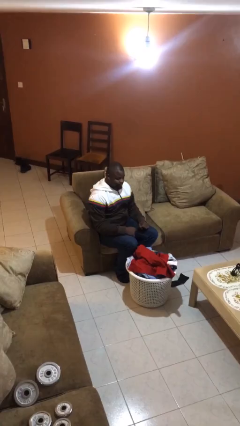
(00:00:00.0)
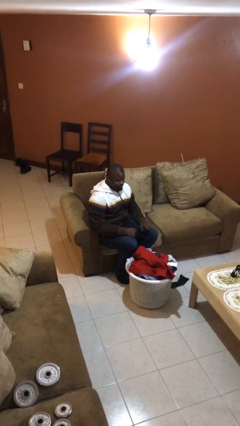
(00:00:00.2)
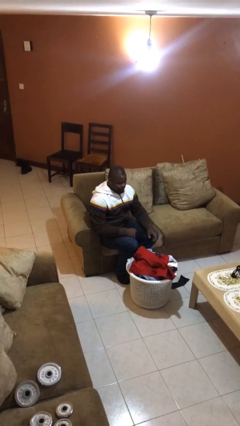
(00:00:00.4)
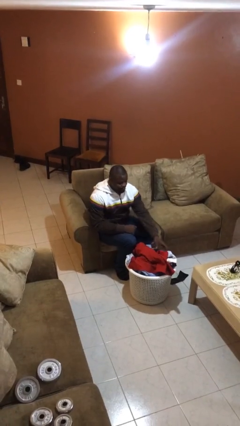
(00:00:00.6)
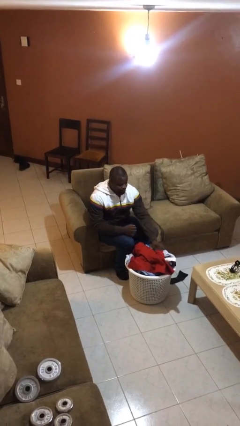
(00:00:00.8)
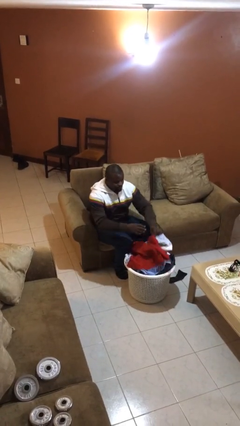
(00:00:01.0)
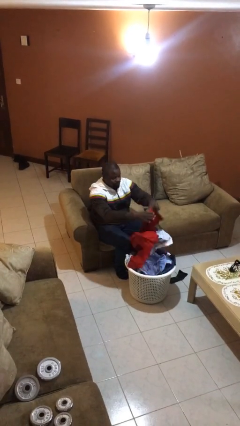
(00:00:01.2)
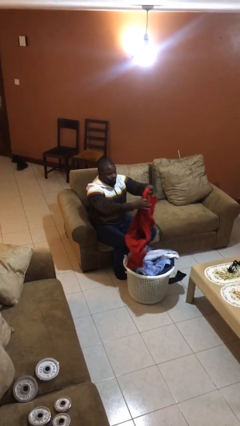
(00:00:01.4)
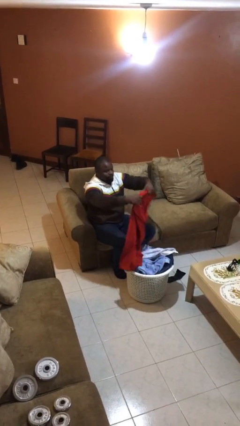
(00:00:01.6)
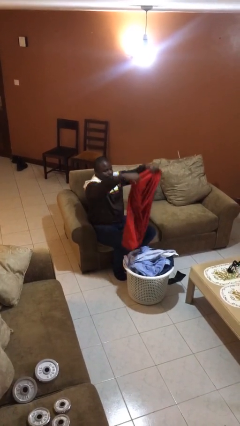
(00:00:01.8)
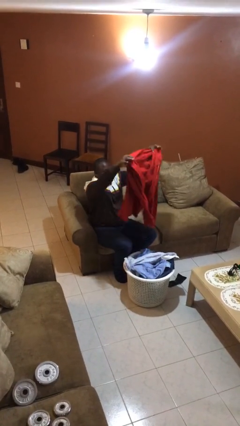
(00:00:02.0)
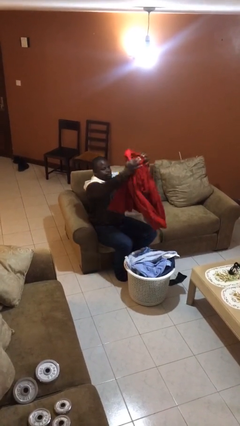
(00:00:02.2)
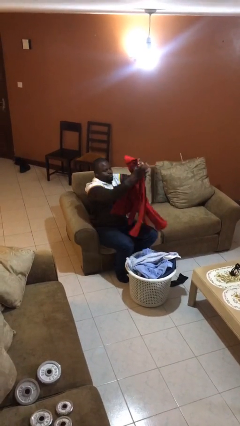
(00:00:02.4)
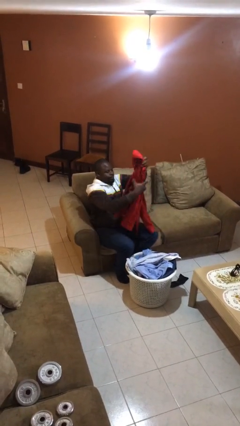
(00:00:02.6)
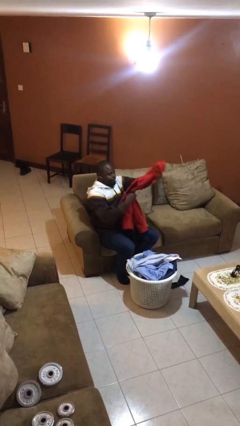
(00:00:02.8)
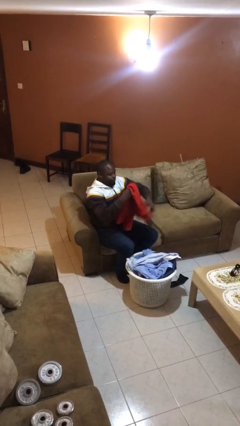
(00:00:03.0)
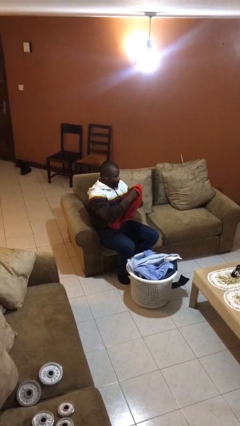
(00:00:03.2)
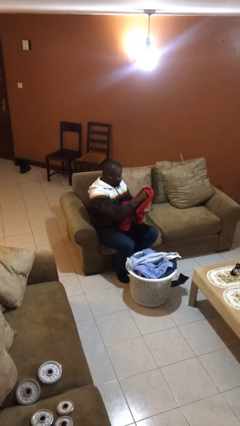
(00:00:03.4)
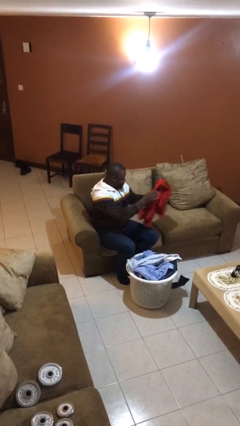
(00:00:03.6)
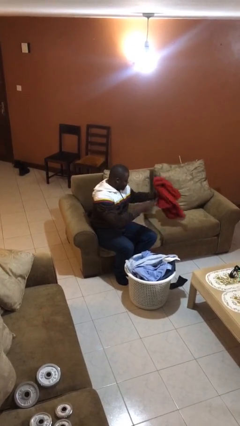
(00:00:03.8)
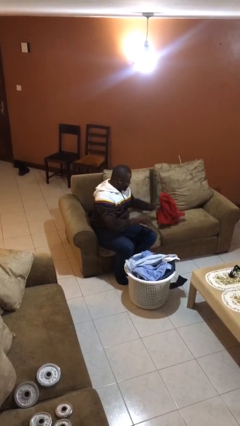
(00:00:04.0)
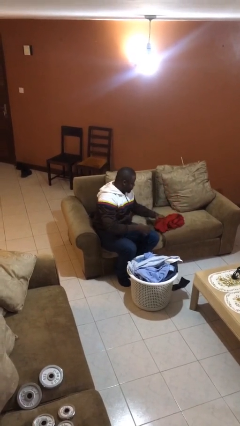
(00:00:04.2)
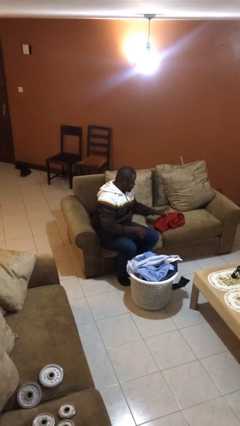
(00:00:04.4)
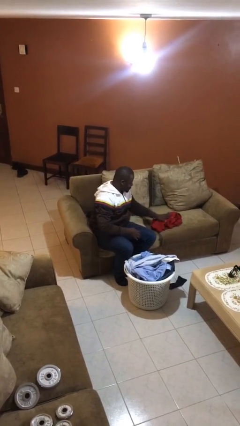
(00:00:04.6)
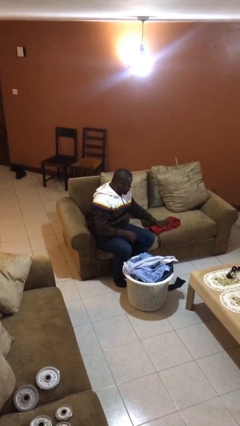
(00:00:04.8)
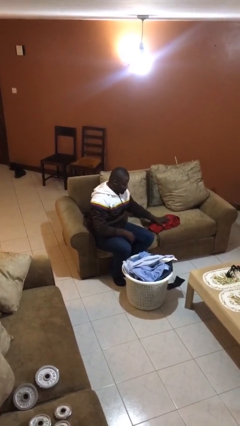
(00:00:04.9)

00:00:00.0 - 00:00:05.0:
person folds shirt

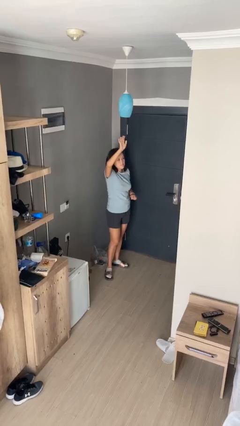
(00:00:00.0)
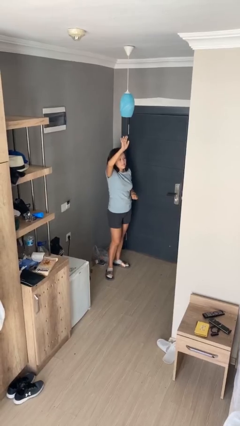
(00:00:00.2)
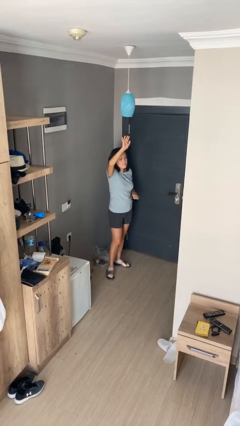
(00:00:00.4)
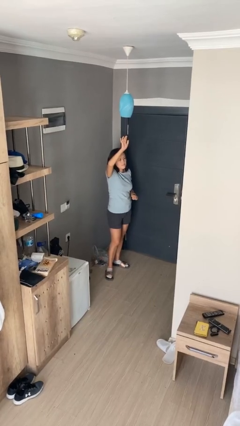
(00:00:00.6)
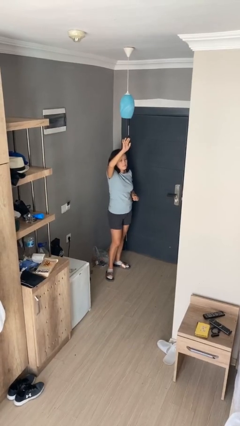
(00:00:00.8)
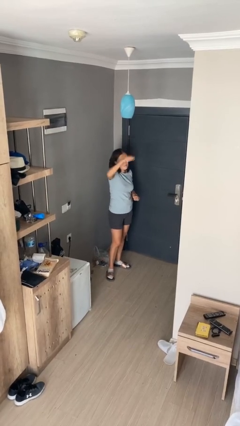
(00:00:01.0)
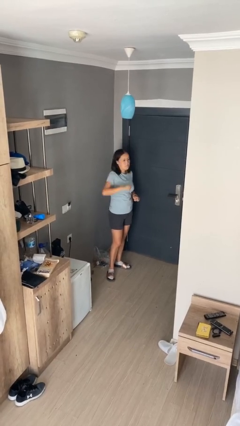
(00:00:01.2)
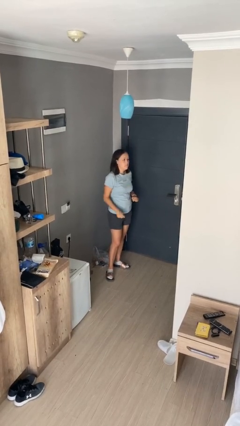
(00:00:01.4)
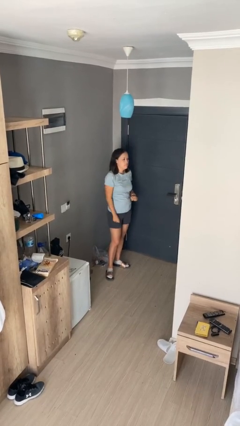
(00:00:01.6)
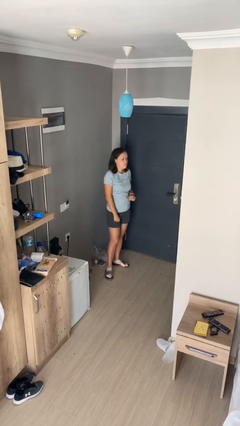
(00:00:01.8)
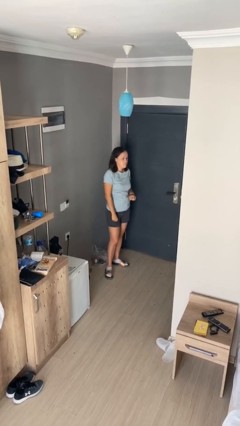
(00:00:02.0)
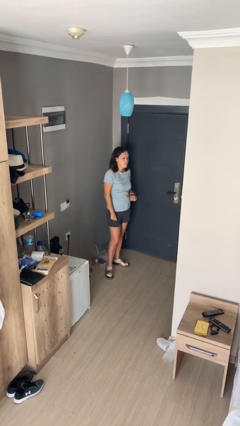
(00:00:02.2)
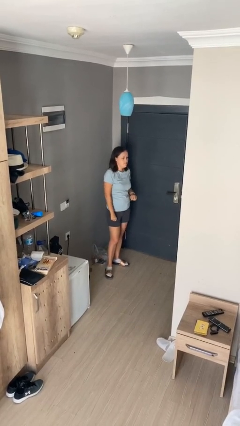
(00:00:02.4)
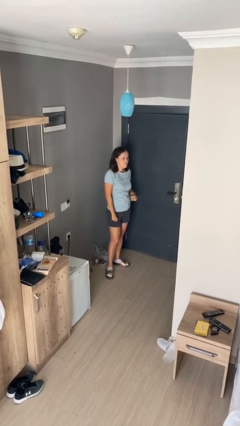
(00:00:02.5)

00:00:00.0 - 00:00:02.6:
person gestures lower hand

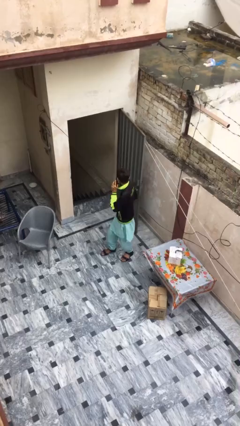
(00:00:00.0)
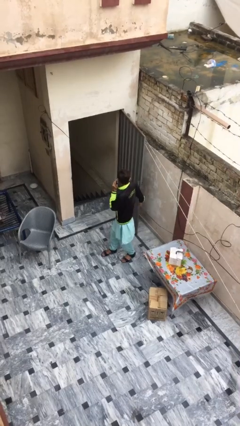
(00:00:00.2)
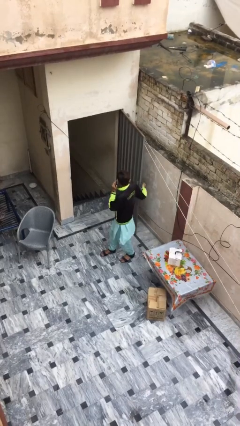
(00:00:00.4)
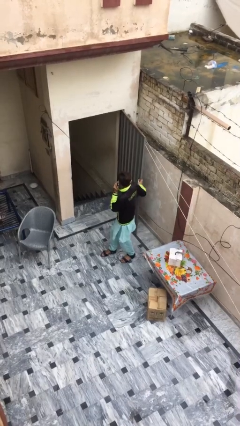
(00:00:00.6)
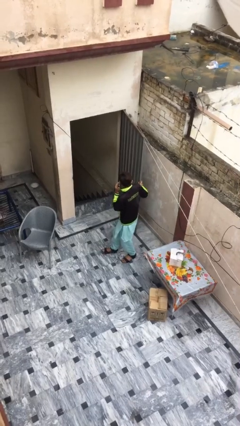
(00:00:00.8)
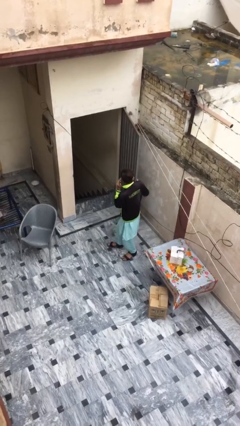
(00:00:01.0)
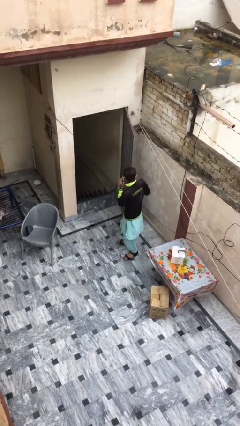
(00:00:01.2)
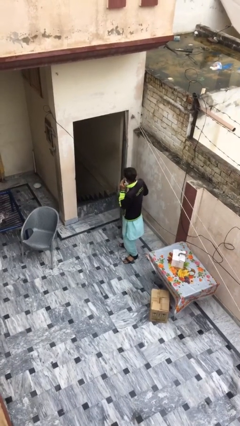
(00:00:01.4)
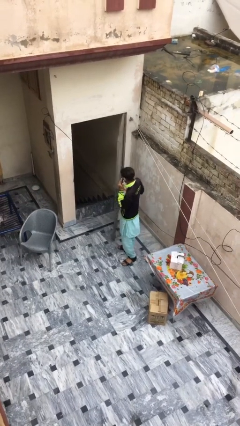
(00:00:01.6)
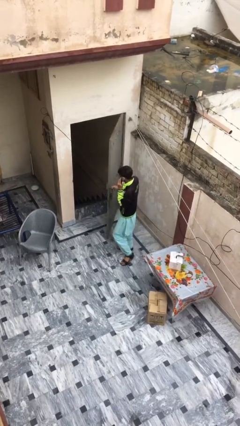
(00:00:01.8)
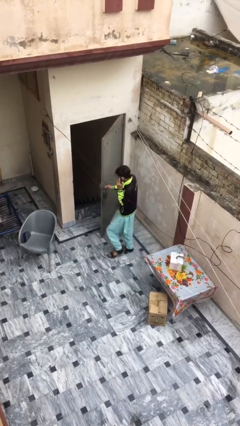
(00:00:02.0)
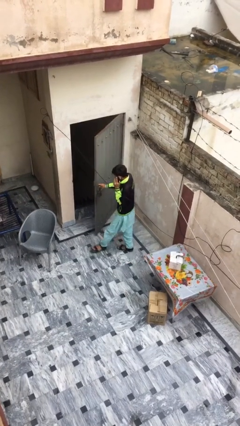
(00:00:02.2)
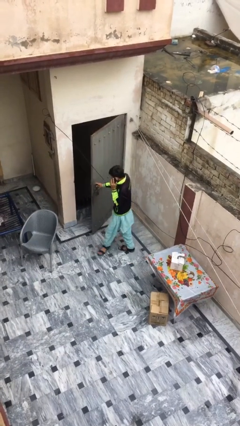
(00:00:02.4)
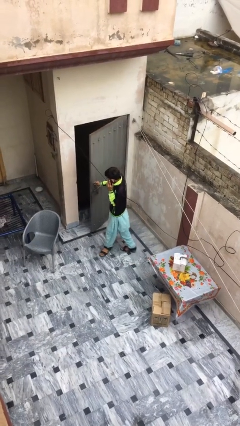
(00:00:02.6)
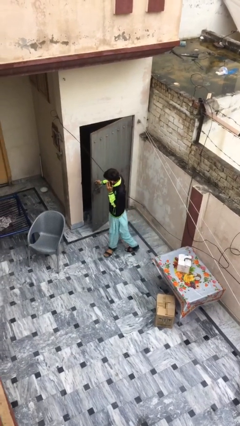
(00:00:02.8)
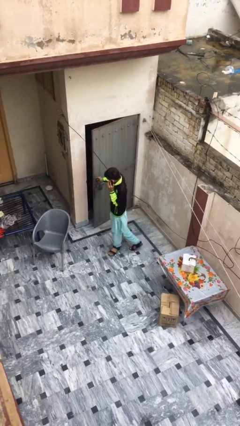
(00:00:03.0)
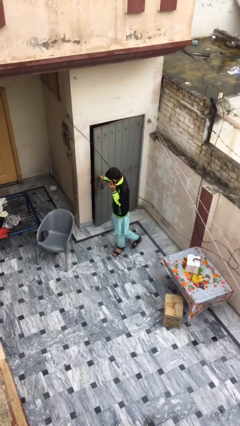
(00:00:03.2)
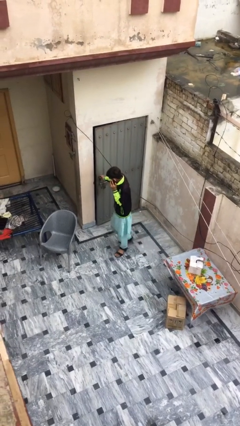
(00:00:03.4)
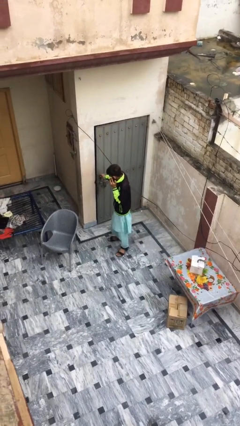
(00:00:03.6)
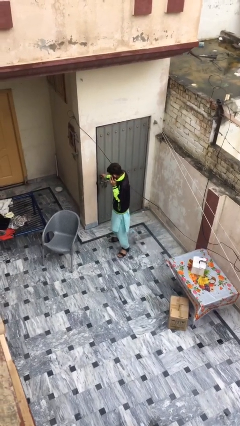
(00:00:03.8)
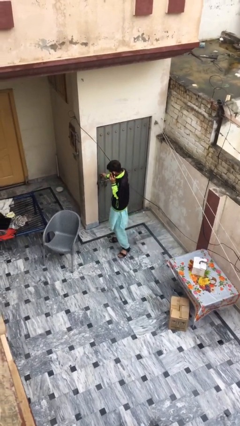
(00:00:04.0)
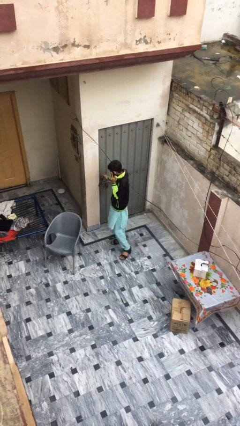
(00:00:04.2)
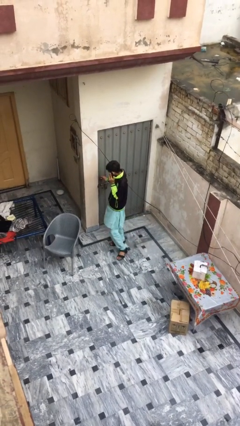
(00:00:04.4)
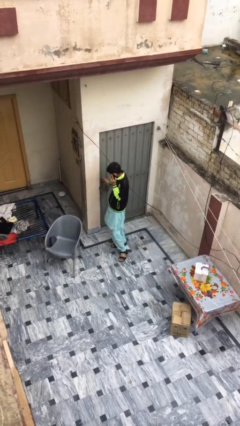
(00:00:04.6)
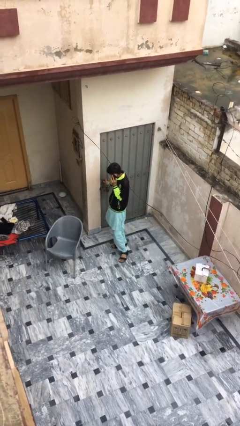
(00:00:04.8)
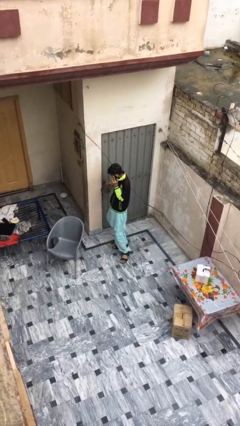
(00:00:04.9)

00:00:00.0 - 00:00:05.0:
person closes facility door

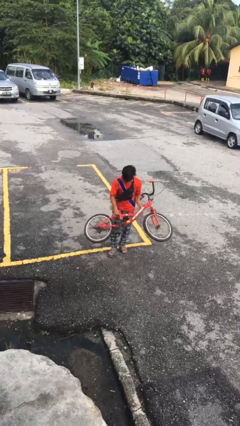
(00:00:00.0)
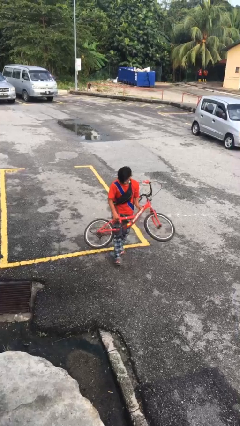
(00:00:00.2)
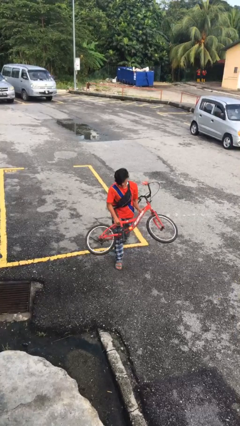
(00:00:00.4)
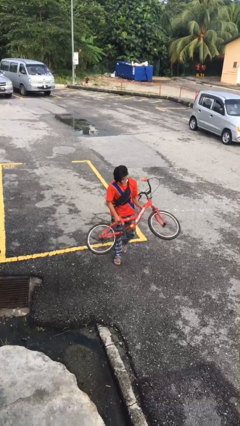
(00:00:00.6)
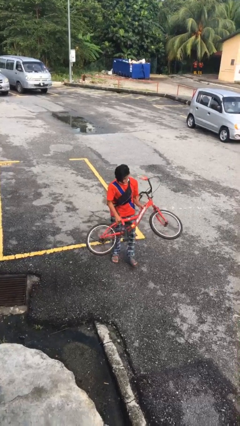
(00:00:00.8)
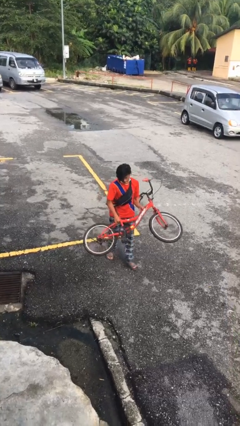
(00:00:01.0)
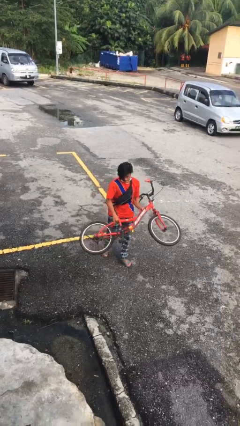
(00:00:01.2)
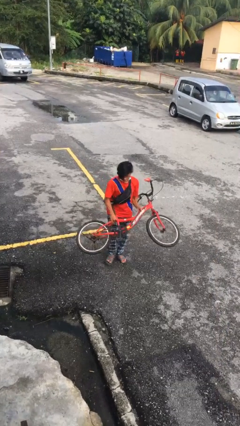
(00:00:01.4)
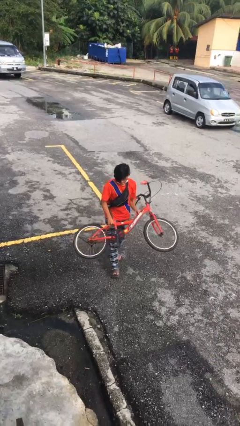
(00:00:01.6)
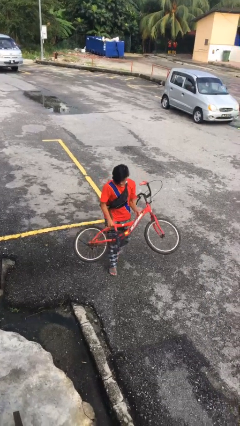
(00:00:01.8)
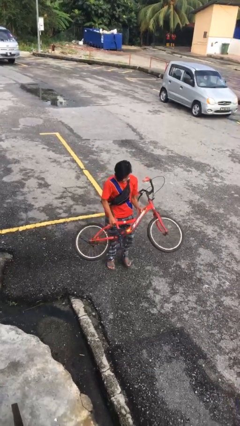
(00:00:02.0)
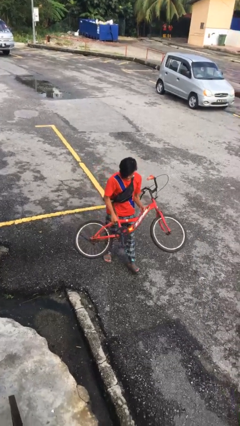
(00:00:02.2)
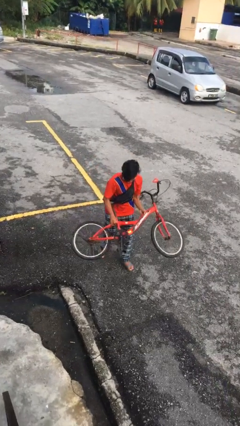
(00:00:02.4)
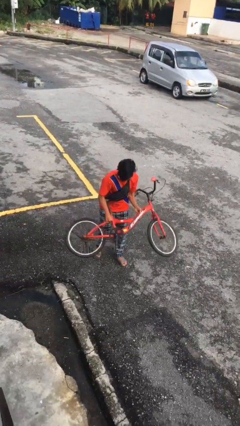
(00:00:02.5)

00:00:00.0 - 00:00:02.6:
person carries heavy object

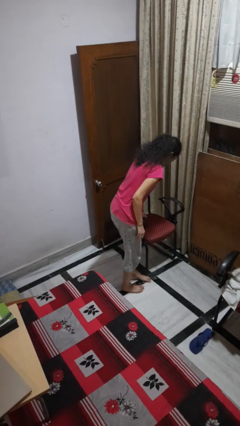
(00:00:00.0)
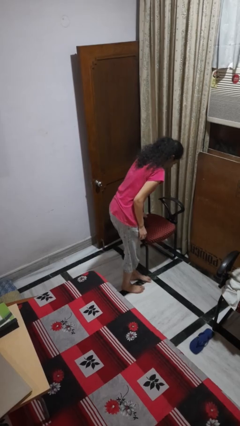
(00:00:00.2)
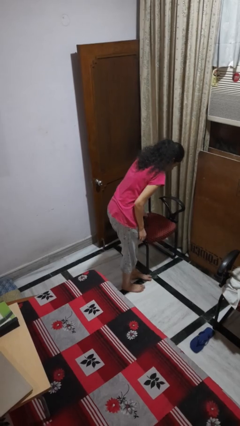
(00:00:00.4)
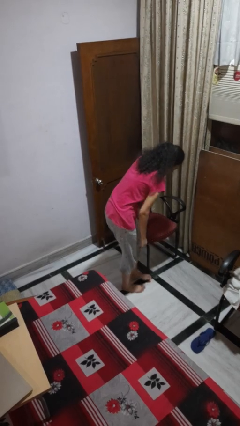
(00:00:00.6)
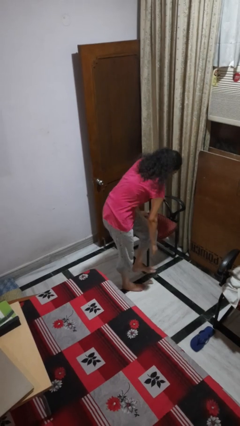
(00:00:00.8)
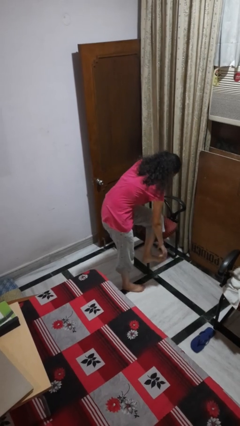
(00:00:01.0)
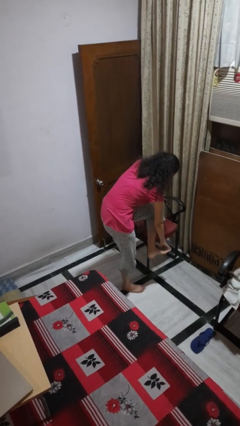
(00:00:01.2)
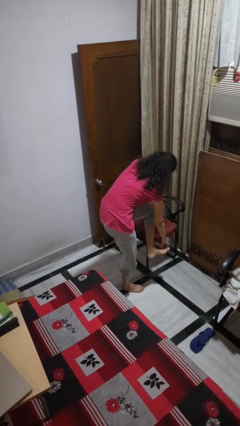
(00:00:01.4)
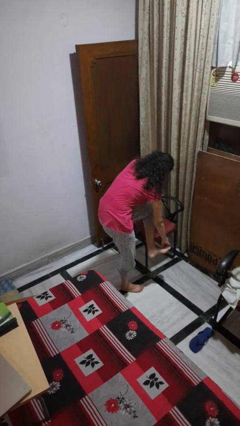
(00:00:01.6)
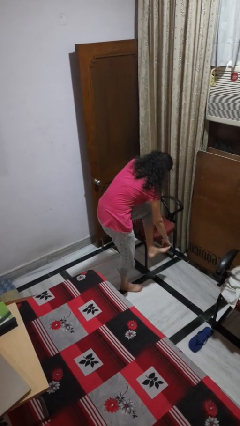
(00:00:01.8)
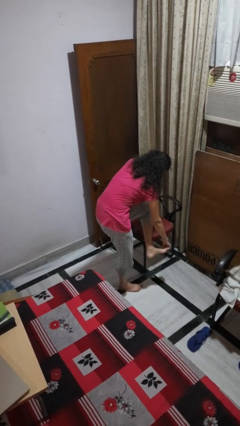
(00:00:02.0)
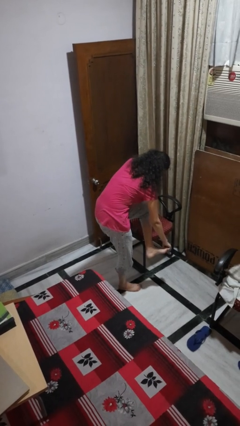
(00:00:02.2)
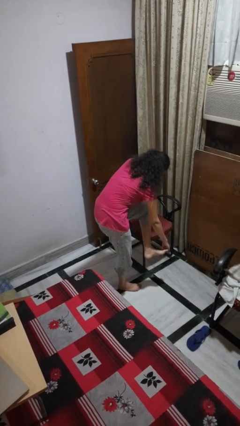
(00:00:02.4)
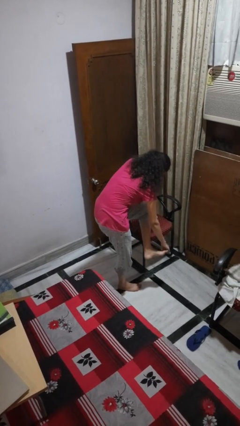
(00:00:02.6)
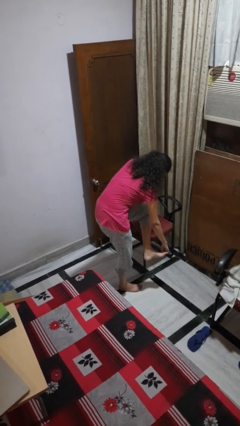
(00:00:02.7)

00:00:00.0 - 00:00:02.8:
person stubs toe
